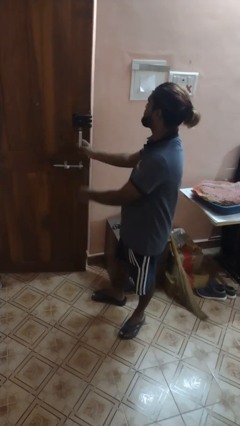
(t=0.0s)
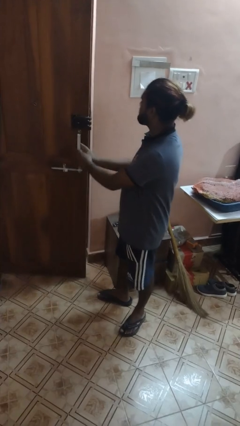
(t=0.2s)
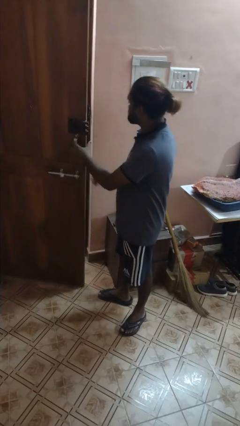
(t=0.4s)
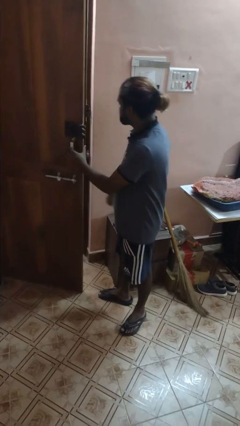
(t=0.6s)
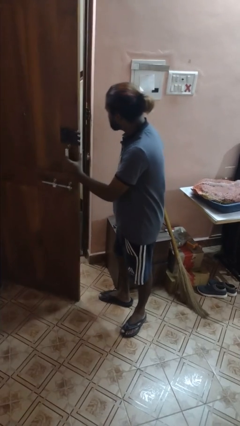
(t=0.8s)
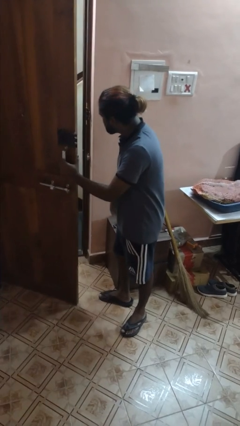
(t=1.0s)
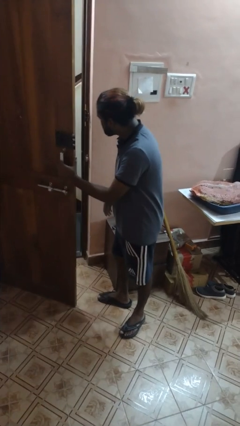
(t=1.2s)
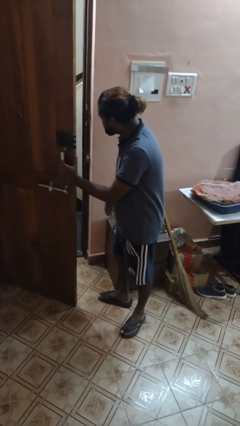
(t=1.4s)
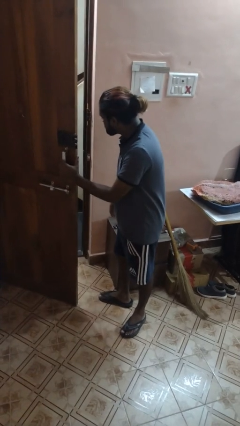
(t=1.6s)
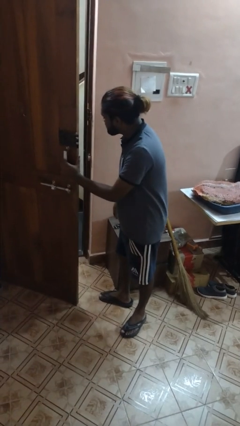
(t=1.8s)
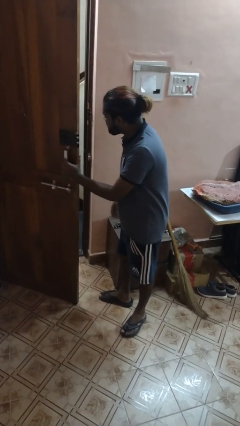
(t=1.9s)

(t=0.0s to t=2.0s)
person opens facility door

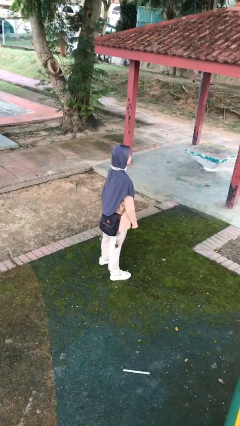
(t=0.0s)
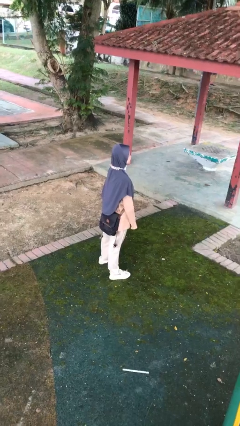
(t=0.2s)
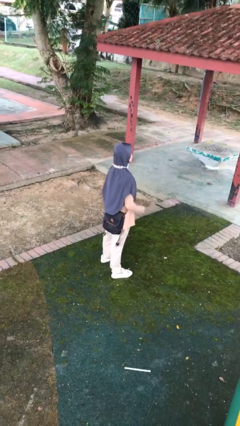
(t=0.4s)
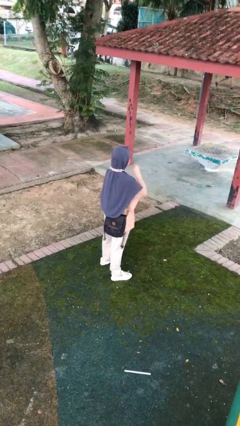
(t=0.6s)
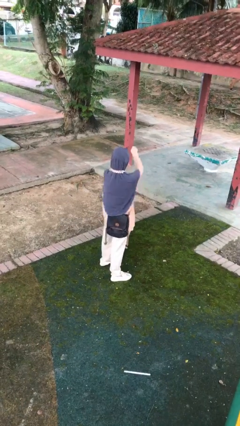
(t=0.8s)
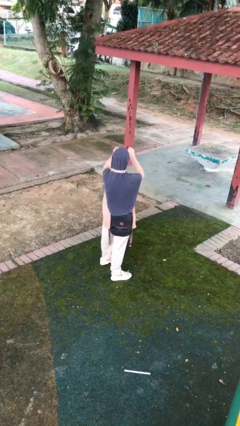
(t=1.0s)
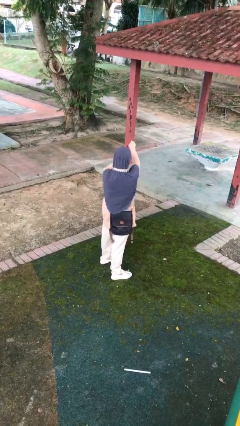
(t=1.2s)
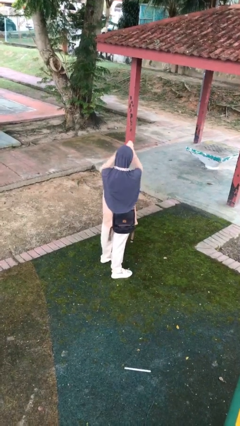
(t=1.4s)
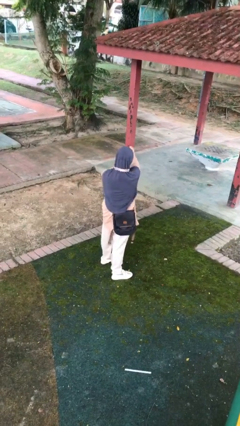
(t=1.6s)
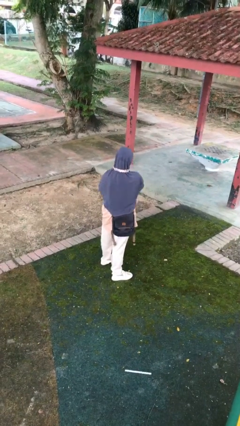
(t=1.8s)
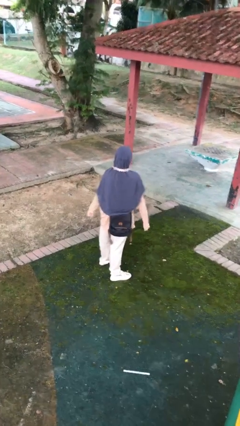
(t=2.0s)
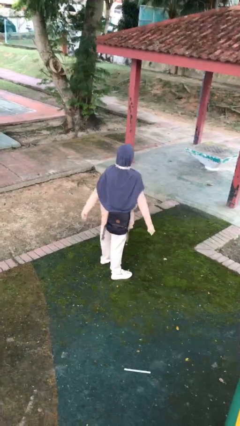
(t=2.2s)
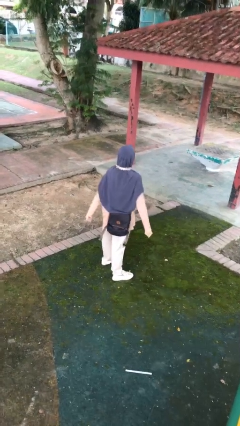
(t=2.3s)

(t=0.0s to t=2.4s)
person punches

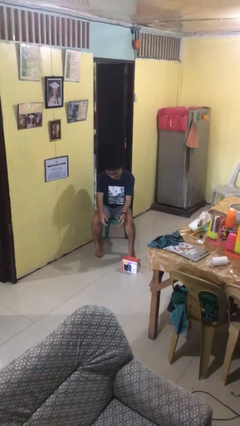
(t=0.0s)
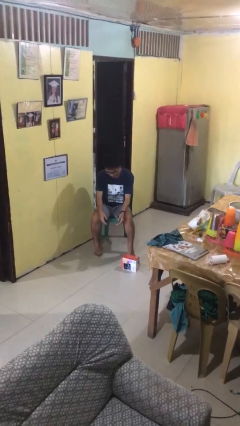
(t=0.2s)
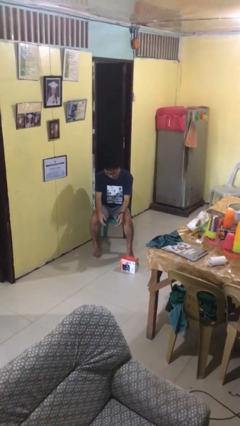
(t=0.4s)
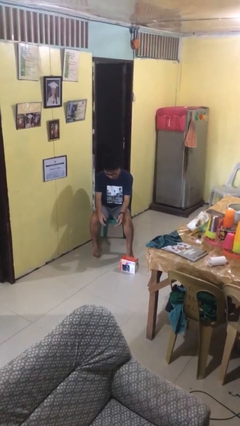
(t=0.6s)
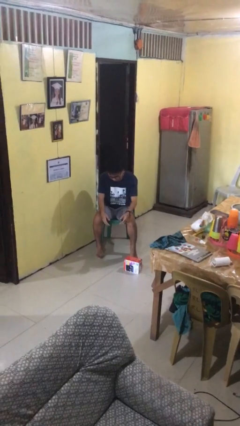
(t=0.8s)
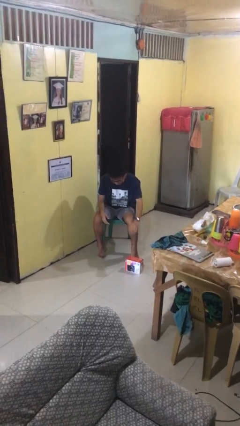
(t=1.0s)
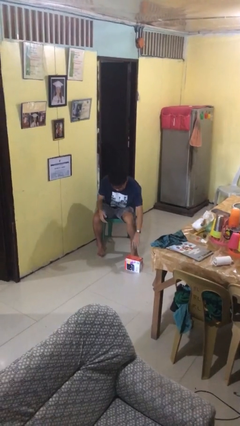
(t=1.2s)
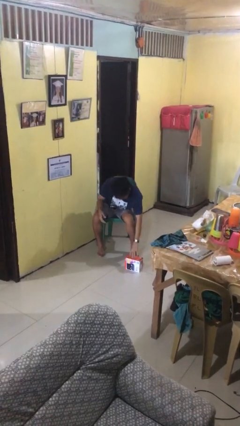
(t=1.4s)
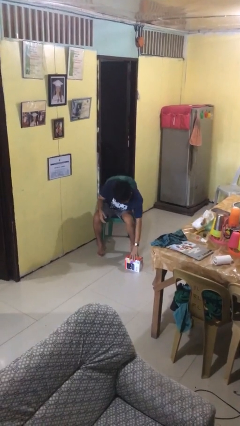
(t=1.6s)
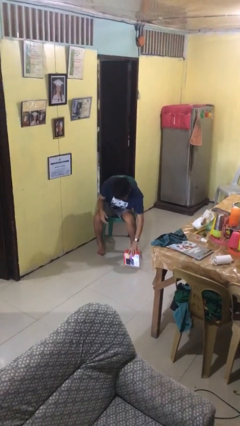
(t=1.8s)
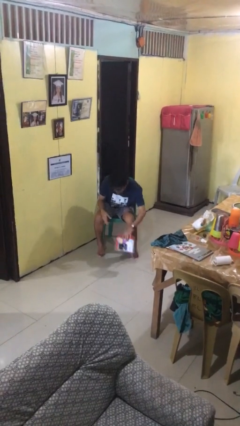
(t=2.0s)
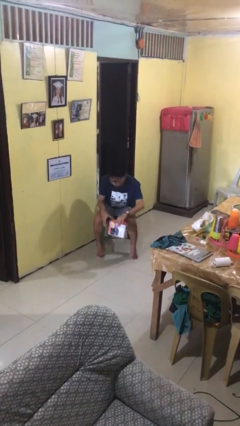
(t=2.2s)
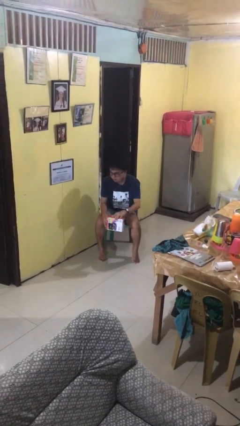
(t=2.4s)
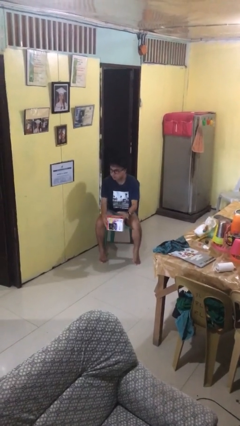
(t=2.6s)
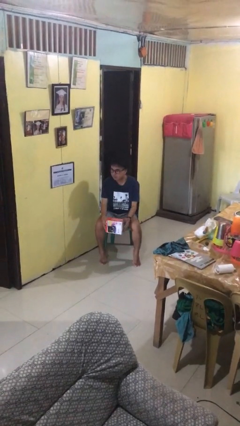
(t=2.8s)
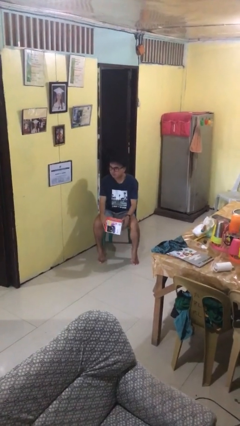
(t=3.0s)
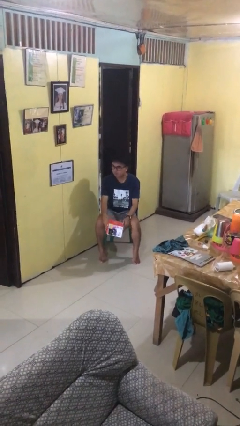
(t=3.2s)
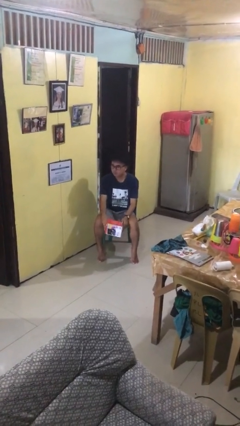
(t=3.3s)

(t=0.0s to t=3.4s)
person picks up object from floor

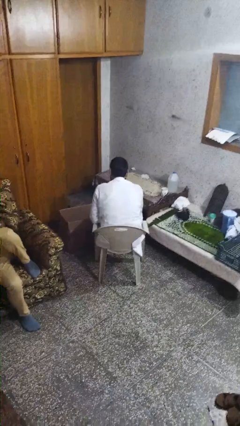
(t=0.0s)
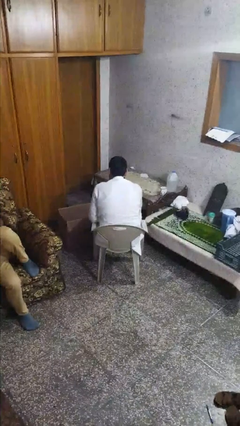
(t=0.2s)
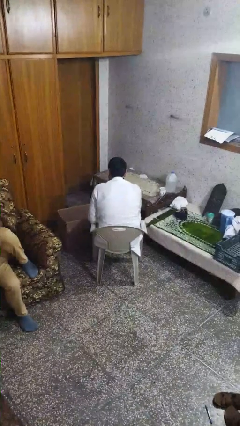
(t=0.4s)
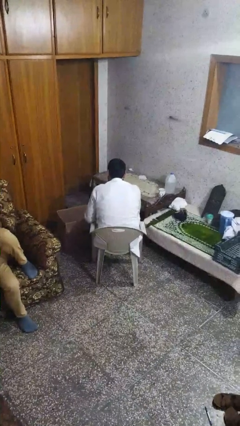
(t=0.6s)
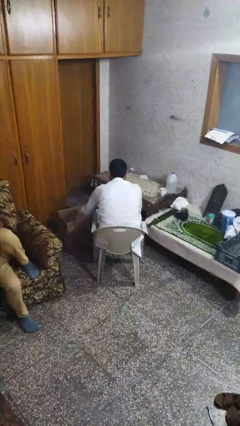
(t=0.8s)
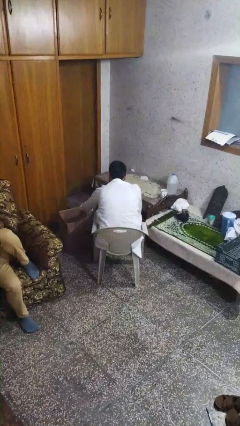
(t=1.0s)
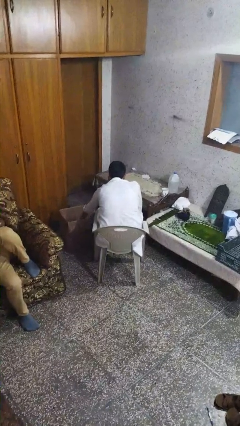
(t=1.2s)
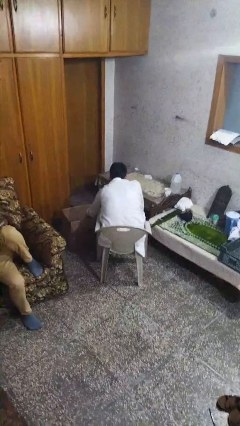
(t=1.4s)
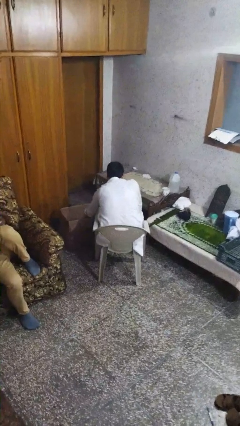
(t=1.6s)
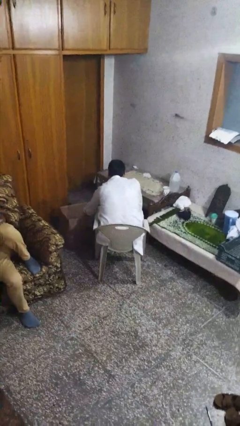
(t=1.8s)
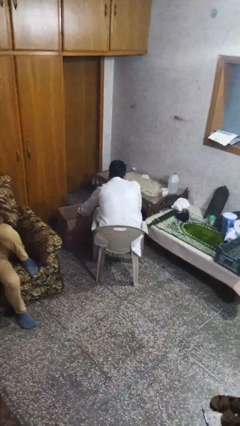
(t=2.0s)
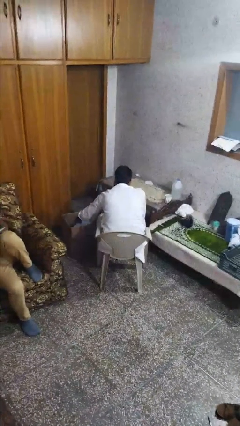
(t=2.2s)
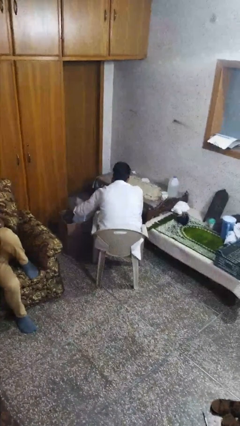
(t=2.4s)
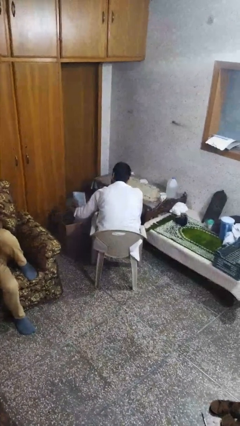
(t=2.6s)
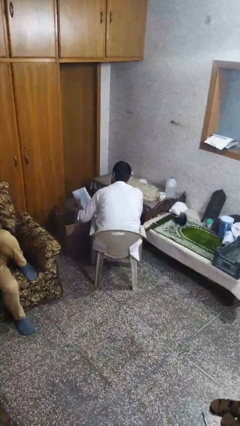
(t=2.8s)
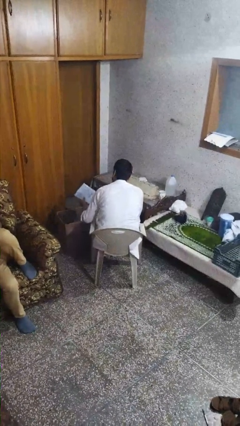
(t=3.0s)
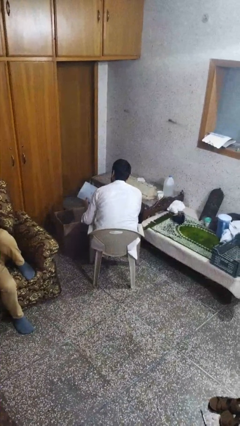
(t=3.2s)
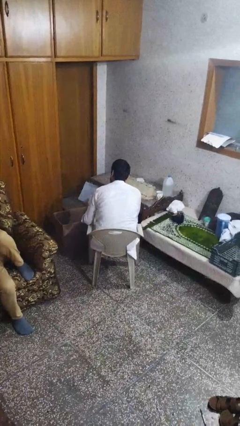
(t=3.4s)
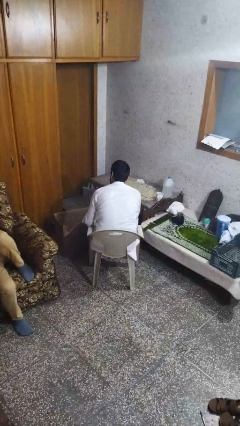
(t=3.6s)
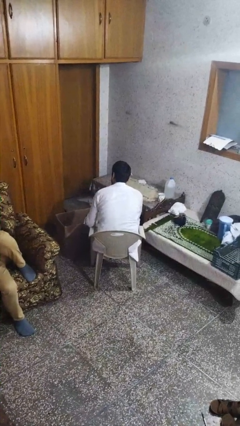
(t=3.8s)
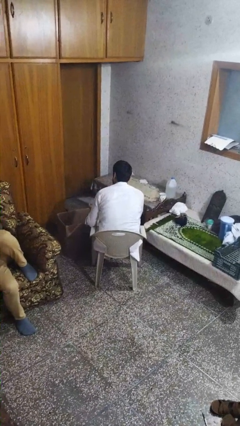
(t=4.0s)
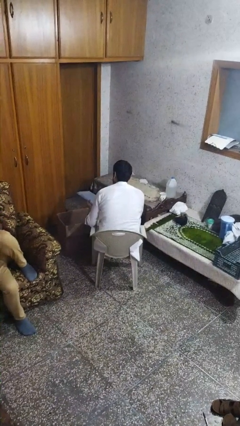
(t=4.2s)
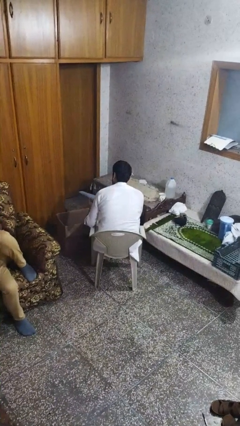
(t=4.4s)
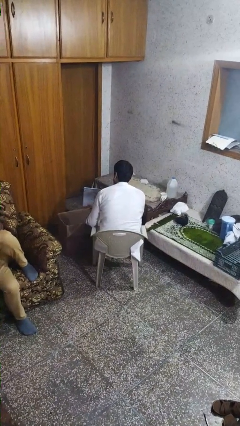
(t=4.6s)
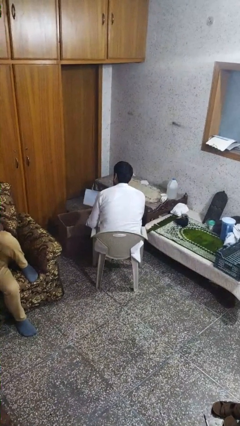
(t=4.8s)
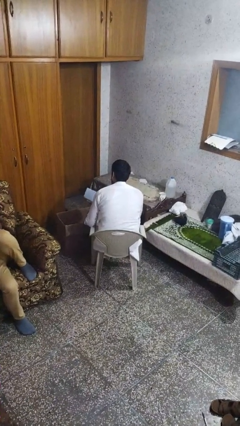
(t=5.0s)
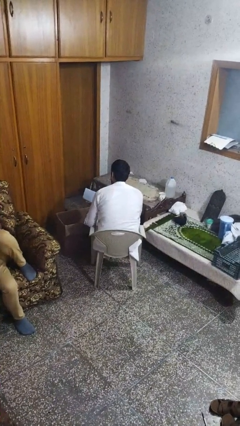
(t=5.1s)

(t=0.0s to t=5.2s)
person takes object from box

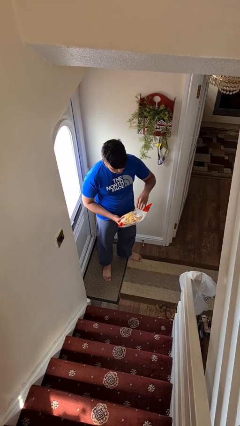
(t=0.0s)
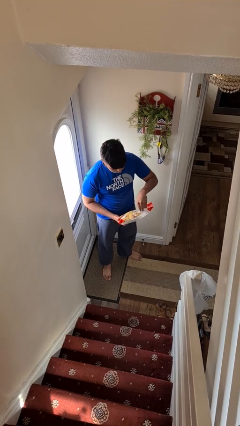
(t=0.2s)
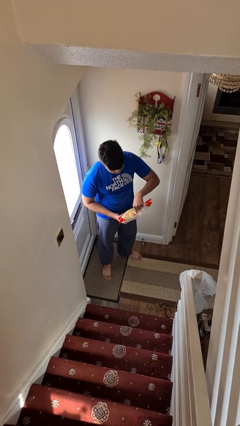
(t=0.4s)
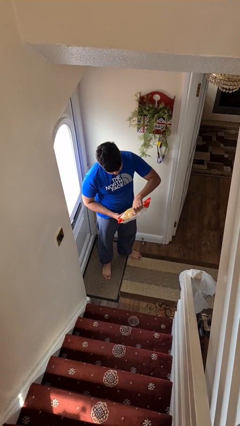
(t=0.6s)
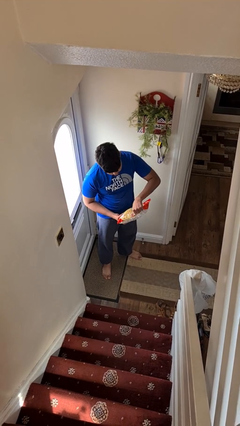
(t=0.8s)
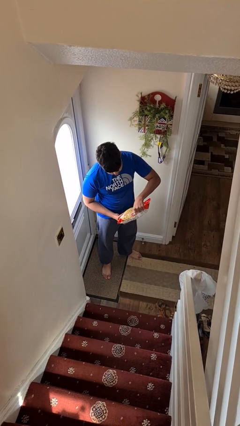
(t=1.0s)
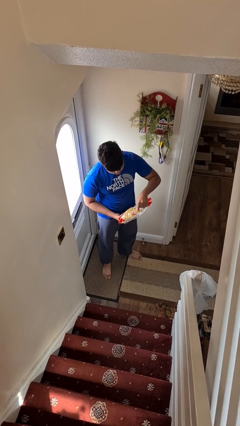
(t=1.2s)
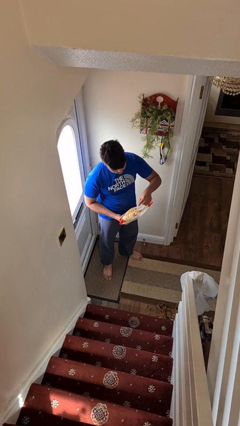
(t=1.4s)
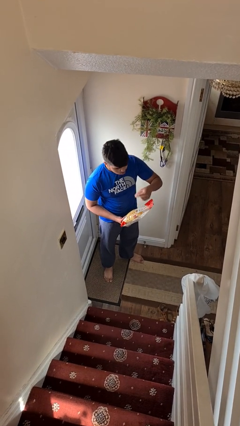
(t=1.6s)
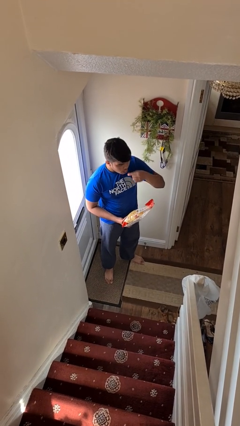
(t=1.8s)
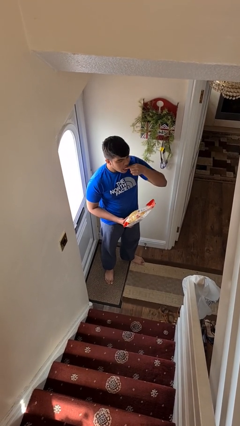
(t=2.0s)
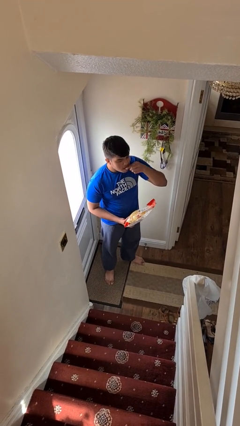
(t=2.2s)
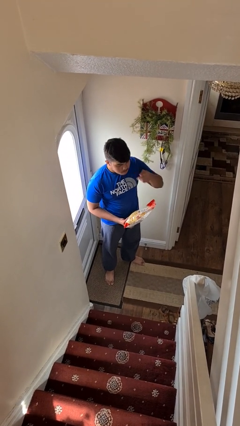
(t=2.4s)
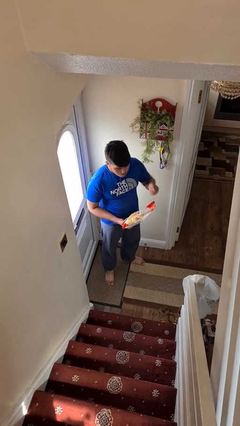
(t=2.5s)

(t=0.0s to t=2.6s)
person eats snack from bag

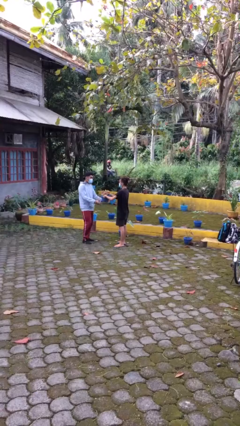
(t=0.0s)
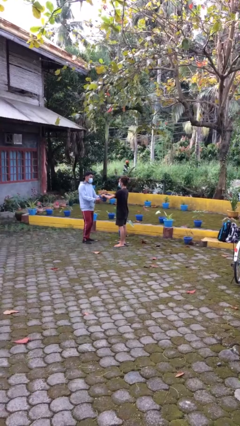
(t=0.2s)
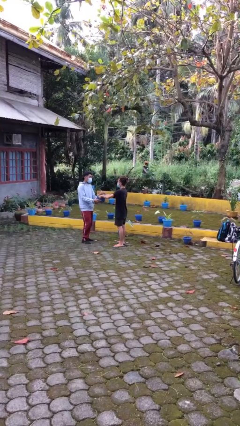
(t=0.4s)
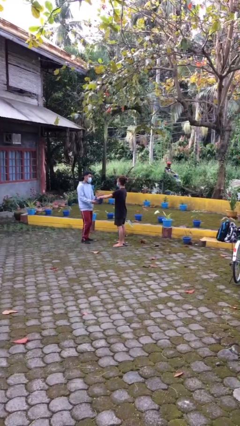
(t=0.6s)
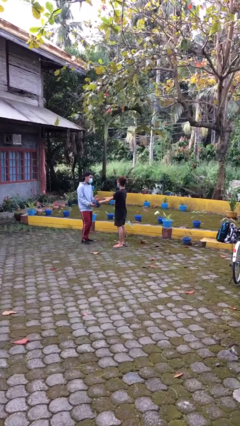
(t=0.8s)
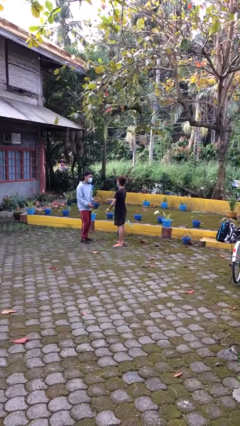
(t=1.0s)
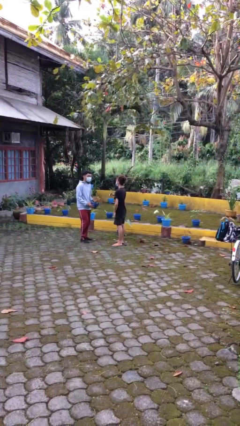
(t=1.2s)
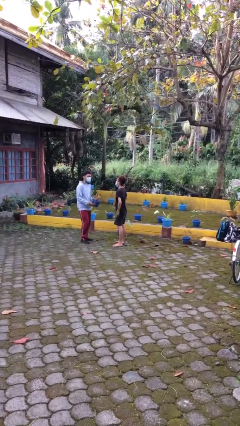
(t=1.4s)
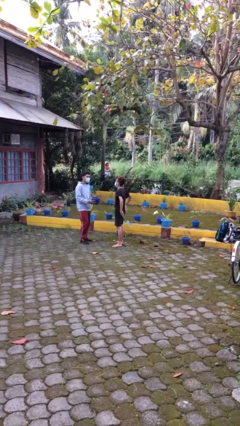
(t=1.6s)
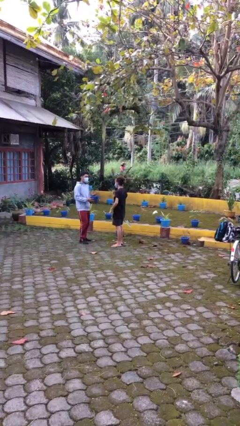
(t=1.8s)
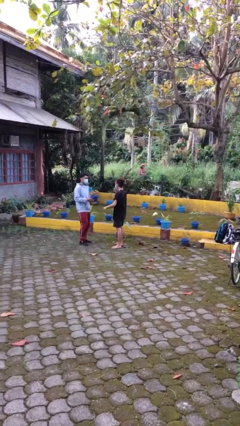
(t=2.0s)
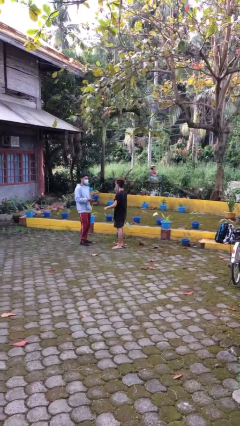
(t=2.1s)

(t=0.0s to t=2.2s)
person transfers object to person
